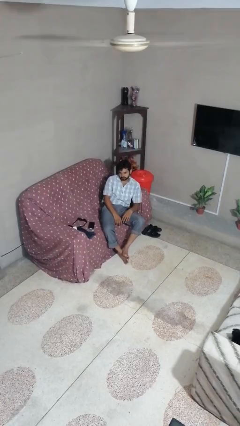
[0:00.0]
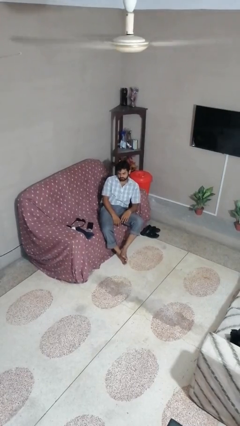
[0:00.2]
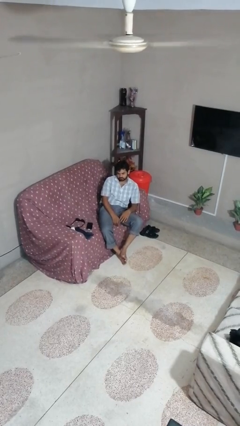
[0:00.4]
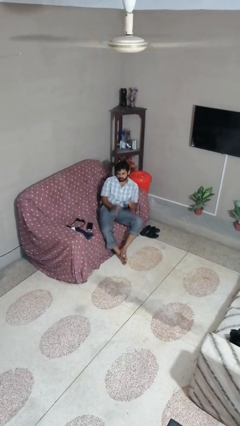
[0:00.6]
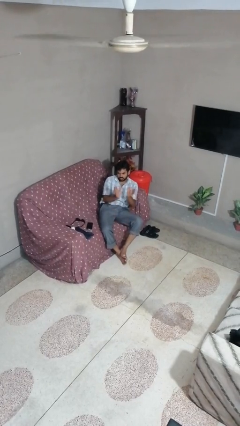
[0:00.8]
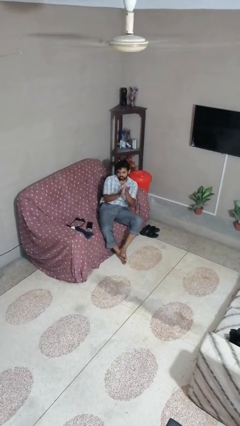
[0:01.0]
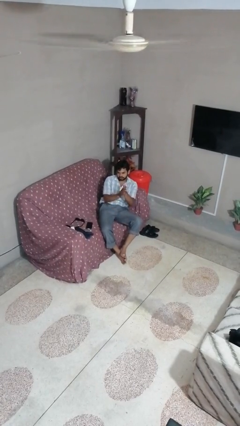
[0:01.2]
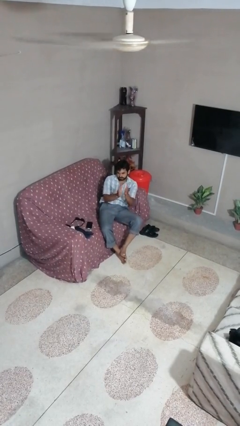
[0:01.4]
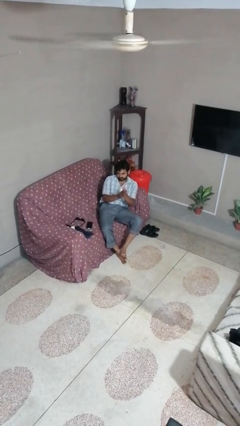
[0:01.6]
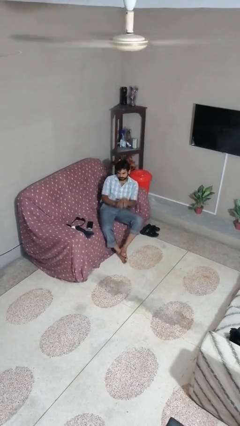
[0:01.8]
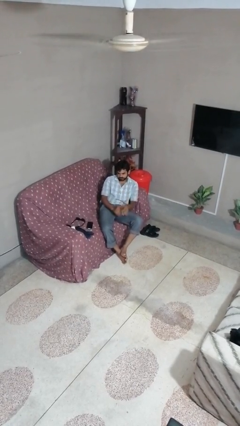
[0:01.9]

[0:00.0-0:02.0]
person claps hands

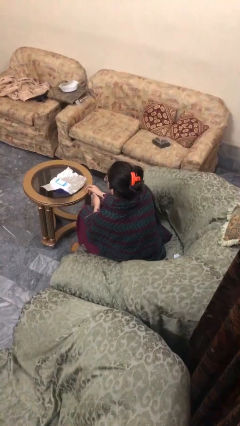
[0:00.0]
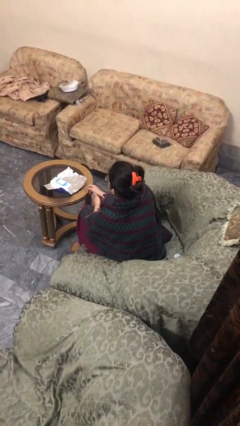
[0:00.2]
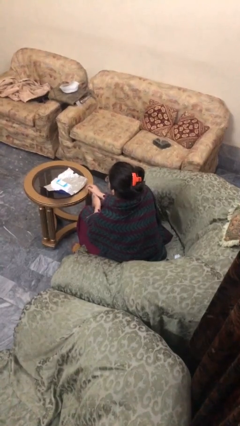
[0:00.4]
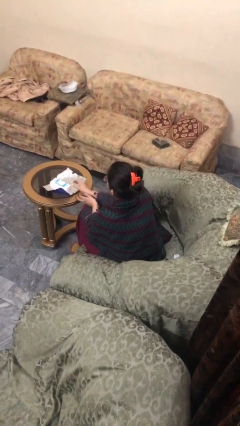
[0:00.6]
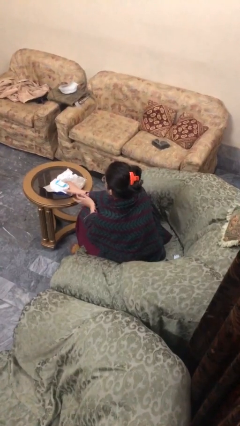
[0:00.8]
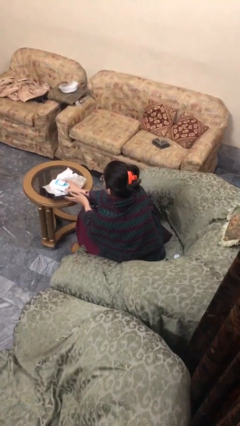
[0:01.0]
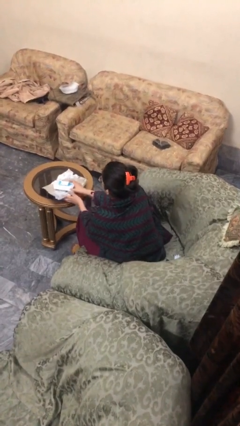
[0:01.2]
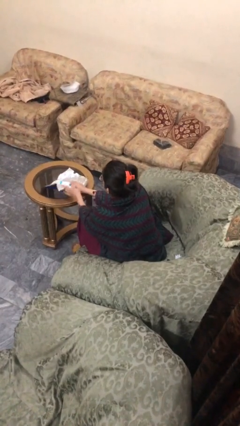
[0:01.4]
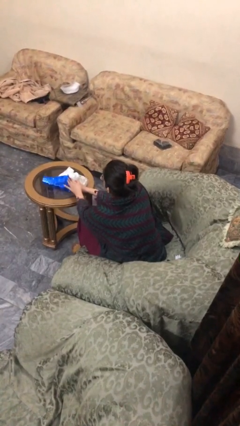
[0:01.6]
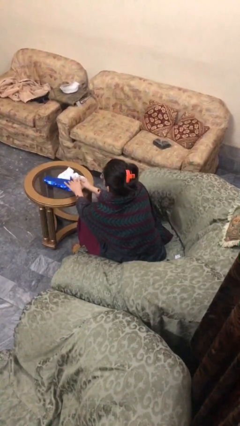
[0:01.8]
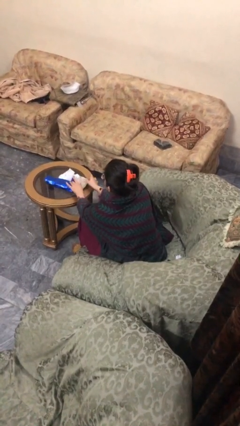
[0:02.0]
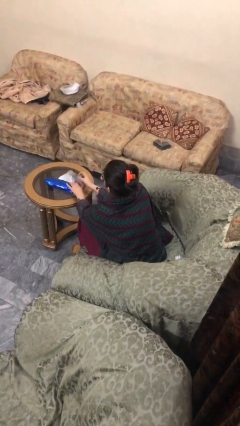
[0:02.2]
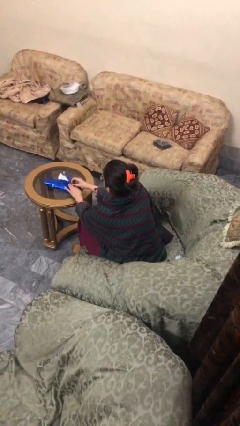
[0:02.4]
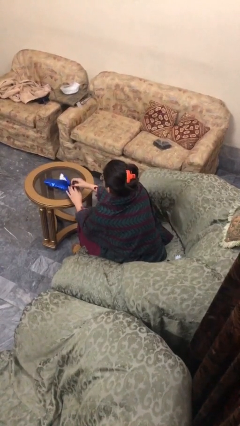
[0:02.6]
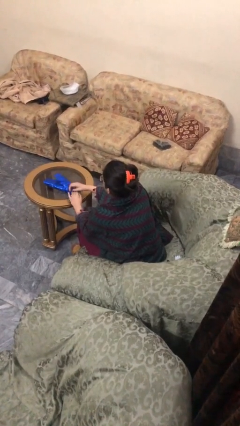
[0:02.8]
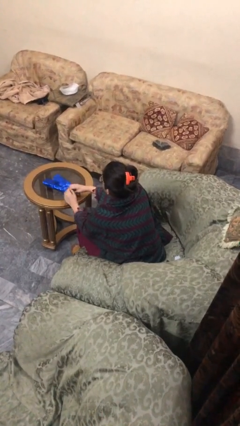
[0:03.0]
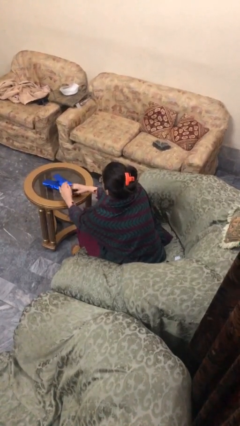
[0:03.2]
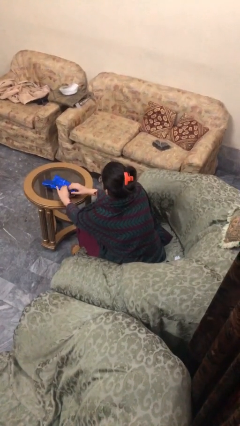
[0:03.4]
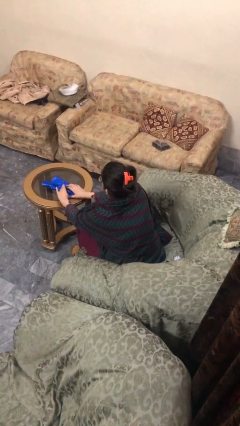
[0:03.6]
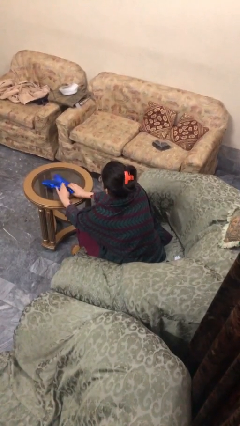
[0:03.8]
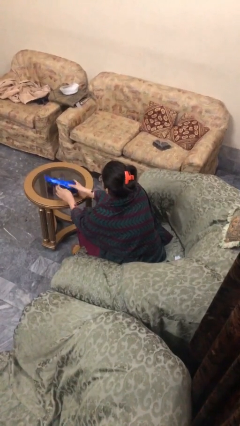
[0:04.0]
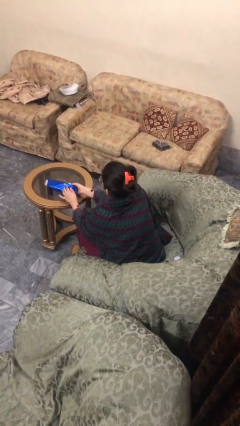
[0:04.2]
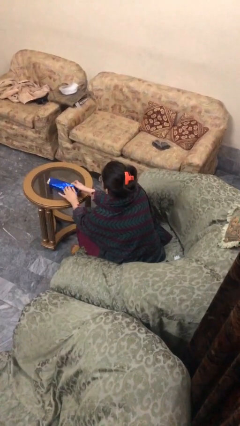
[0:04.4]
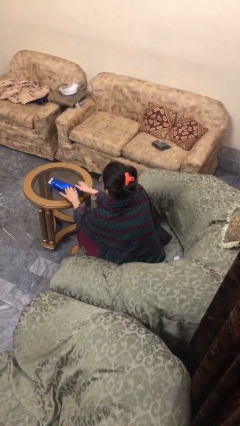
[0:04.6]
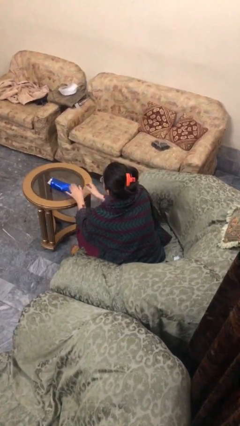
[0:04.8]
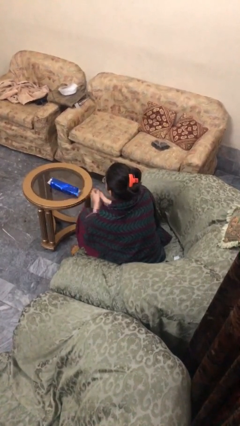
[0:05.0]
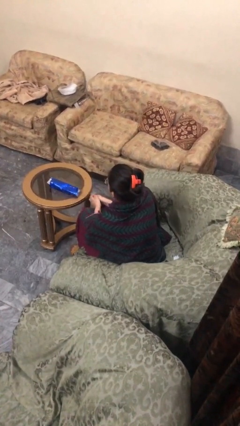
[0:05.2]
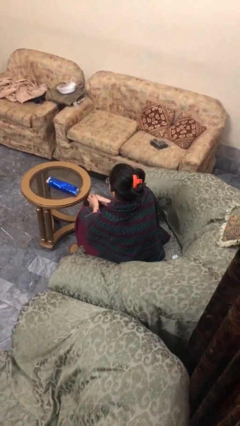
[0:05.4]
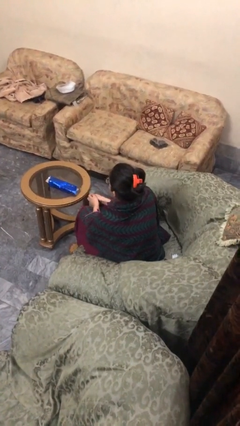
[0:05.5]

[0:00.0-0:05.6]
person wraps box

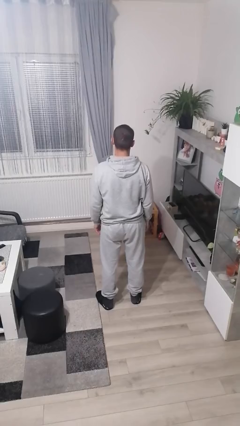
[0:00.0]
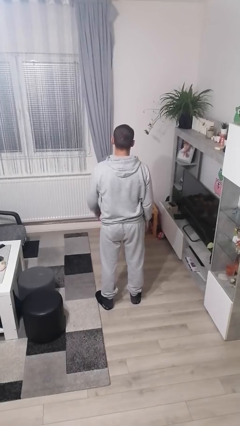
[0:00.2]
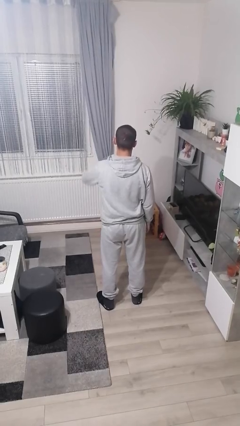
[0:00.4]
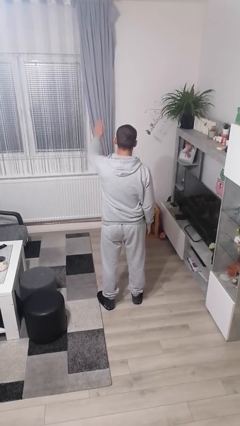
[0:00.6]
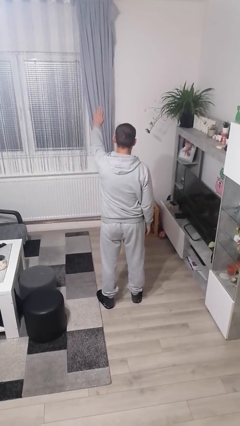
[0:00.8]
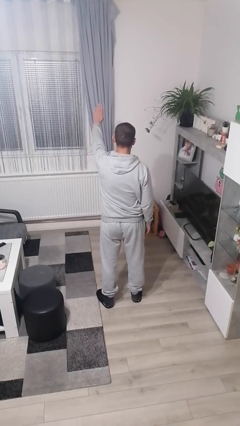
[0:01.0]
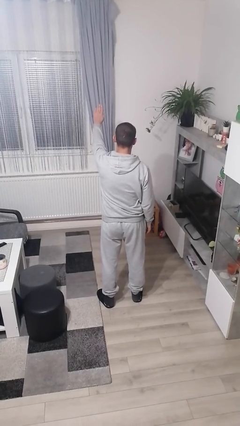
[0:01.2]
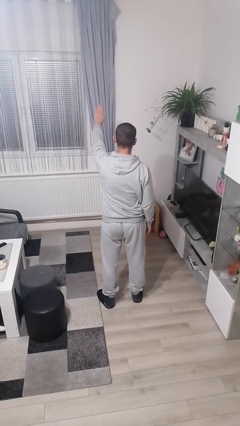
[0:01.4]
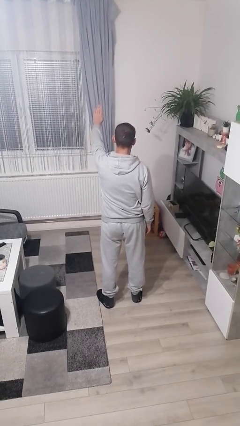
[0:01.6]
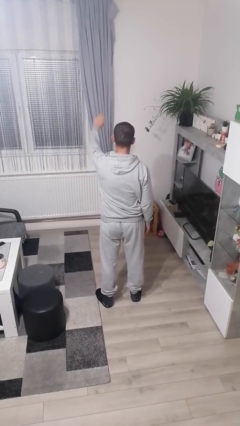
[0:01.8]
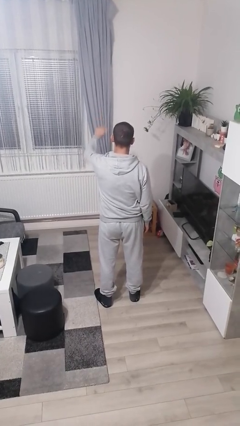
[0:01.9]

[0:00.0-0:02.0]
person gestures stop

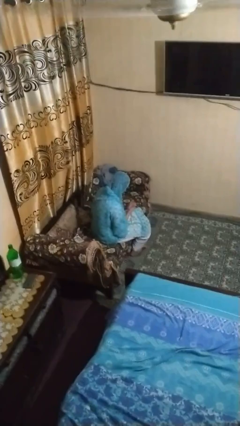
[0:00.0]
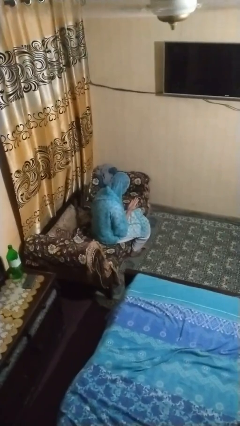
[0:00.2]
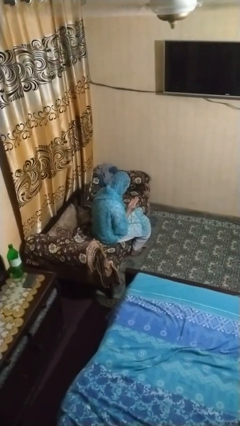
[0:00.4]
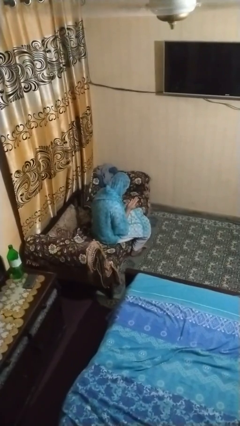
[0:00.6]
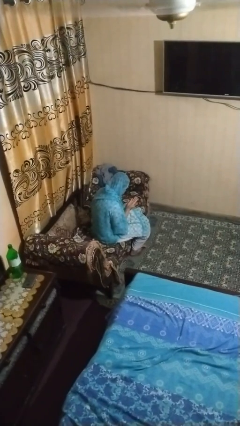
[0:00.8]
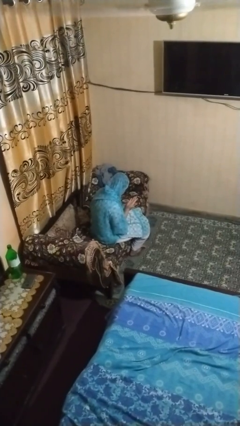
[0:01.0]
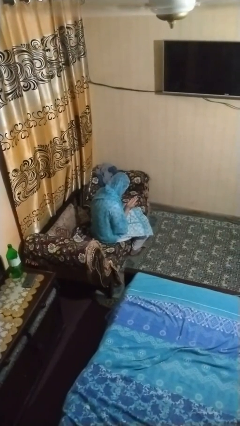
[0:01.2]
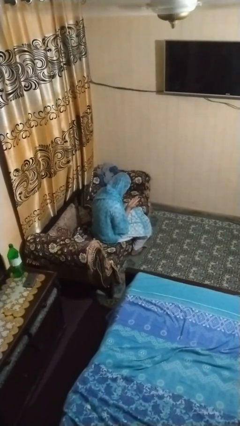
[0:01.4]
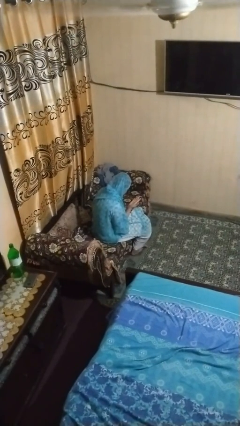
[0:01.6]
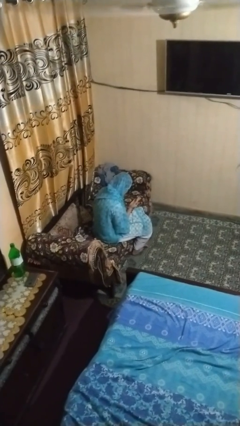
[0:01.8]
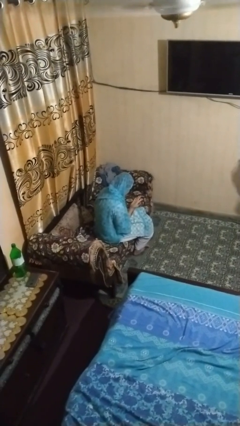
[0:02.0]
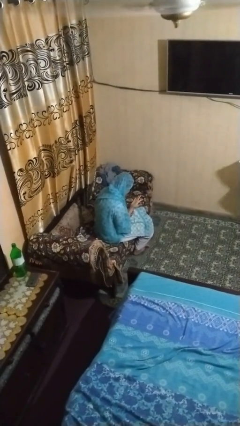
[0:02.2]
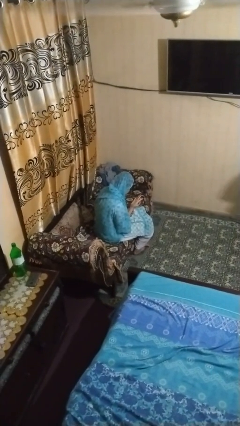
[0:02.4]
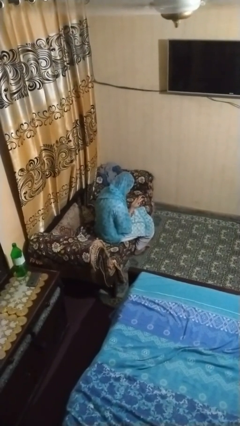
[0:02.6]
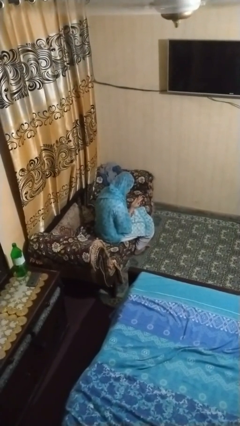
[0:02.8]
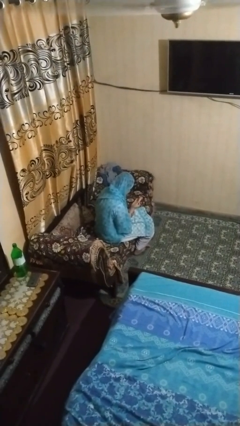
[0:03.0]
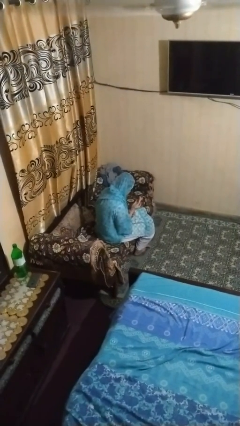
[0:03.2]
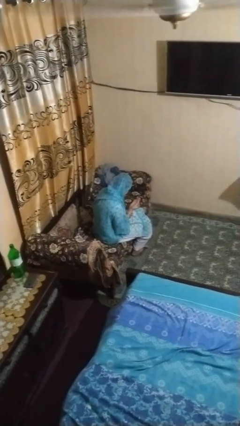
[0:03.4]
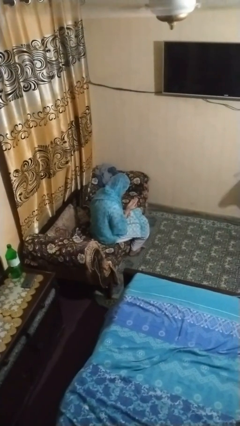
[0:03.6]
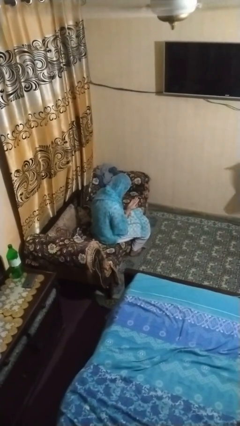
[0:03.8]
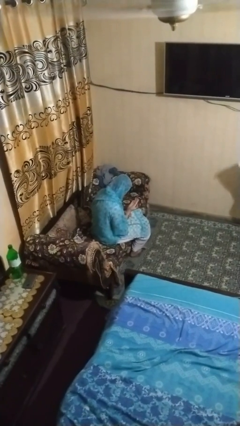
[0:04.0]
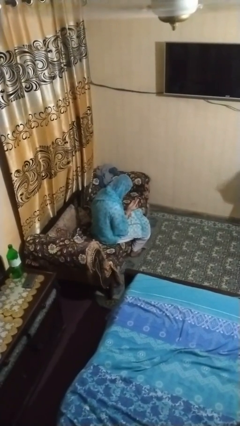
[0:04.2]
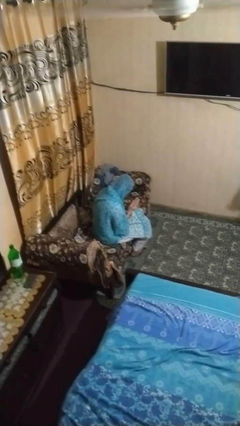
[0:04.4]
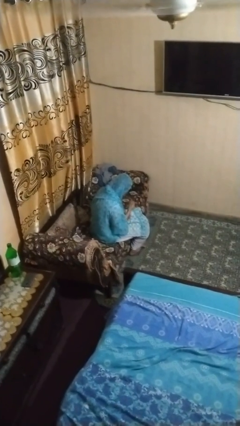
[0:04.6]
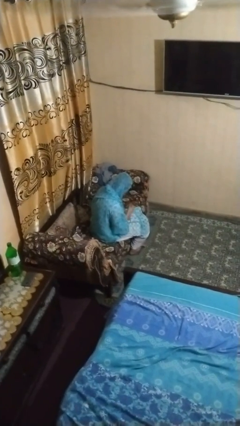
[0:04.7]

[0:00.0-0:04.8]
person looks at hands in lap

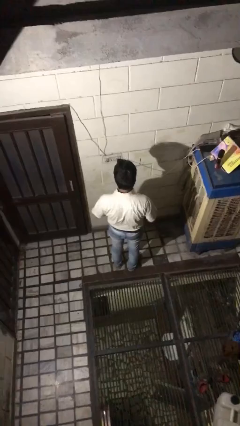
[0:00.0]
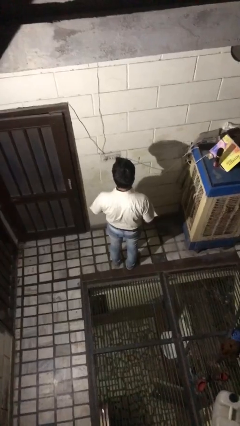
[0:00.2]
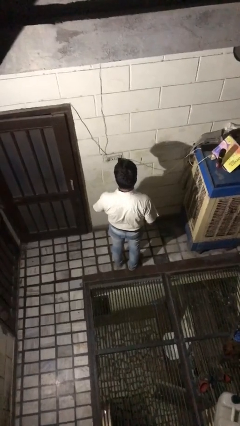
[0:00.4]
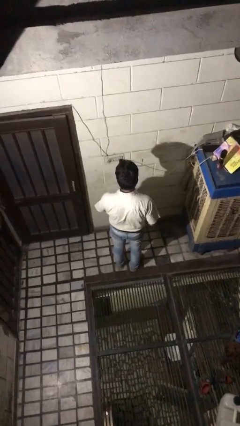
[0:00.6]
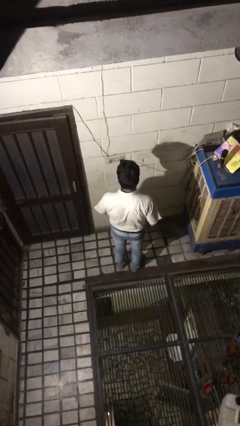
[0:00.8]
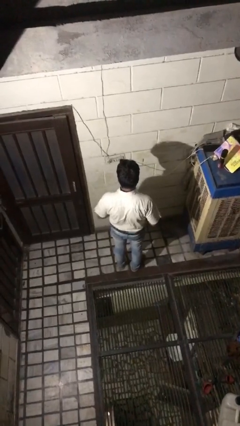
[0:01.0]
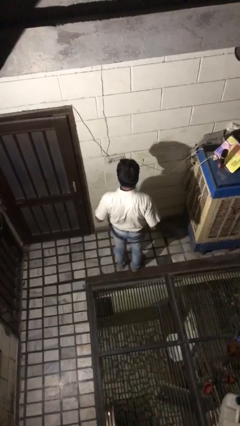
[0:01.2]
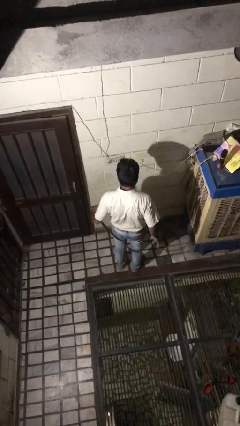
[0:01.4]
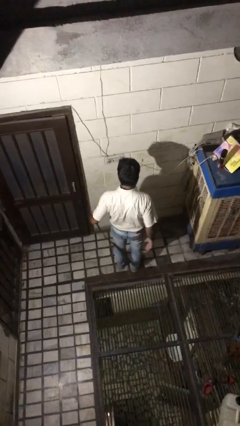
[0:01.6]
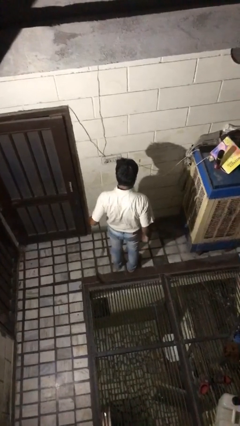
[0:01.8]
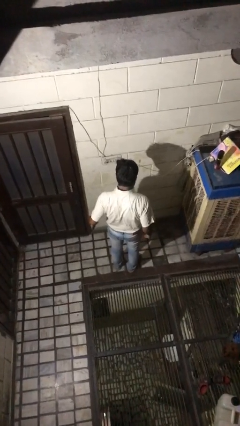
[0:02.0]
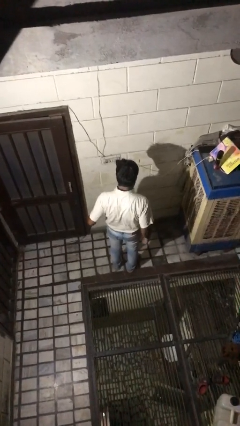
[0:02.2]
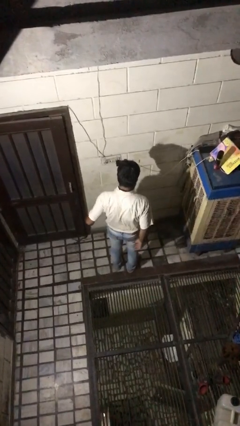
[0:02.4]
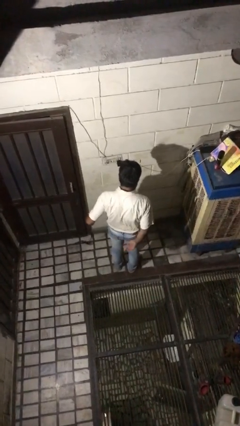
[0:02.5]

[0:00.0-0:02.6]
person takes off belt

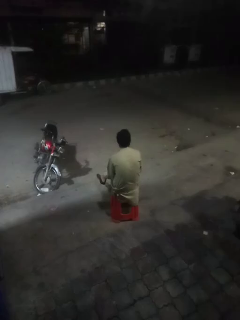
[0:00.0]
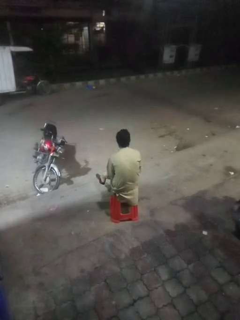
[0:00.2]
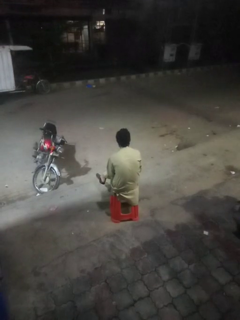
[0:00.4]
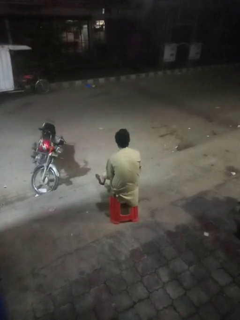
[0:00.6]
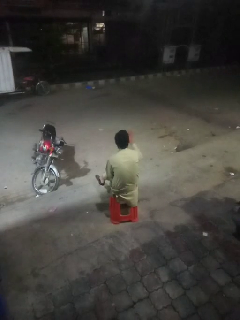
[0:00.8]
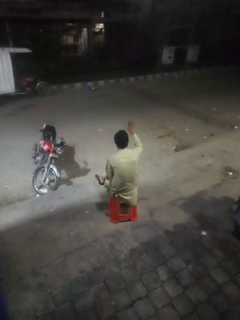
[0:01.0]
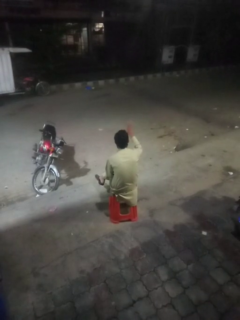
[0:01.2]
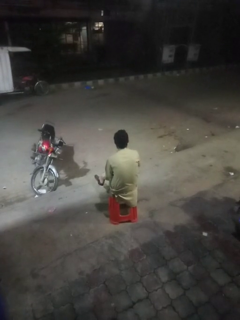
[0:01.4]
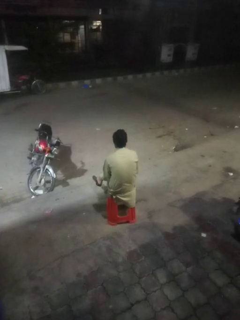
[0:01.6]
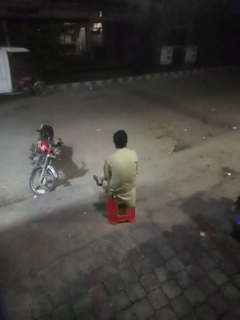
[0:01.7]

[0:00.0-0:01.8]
person gestures number five
